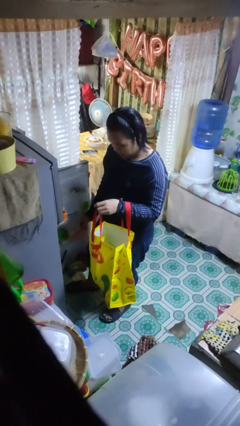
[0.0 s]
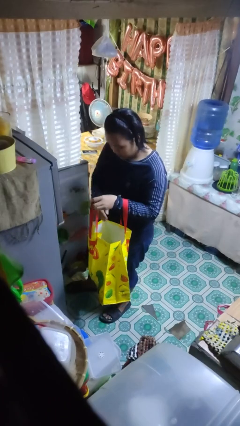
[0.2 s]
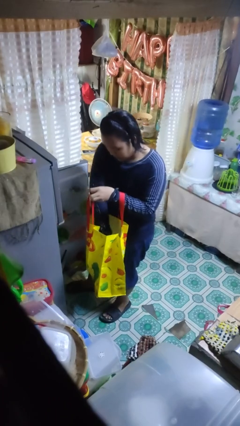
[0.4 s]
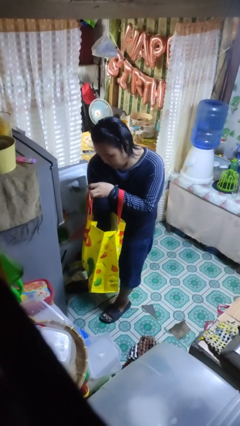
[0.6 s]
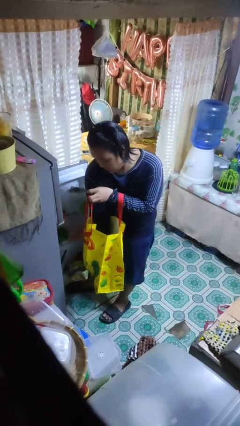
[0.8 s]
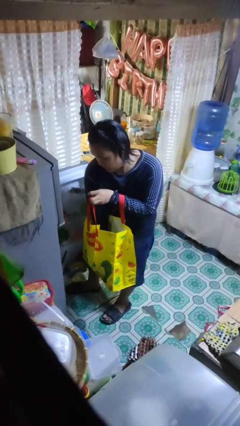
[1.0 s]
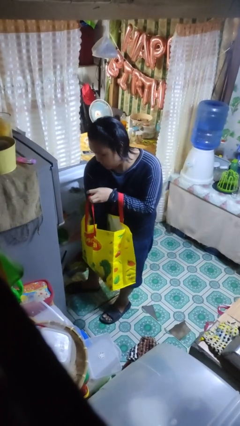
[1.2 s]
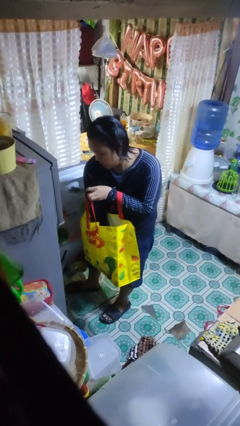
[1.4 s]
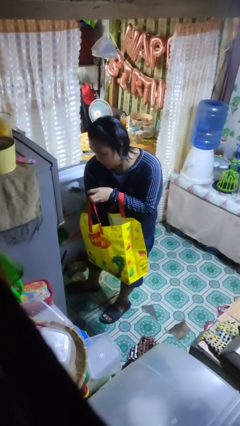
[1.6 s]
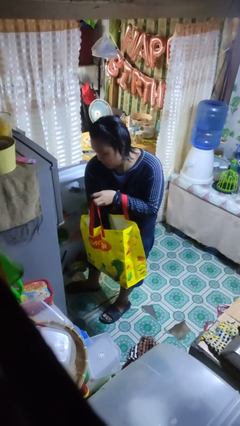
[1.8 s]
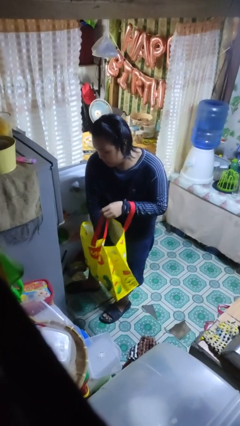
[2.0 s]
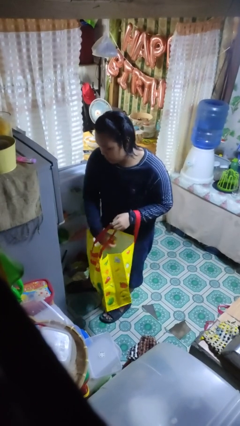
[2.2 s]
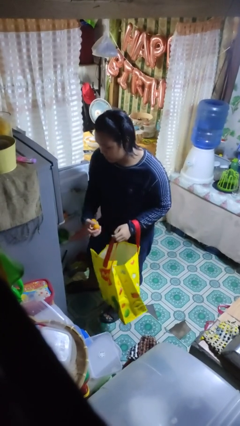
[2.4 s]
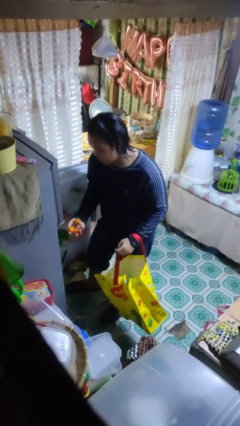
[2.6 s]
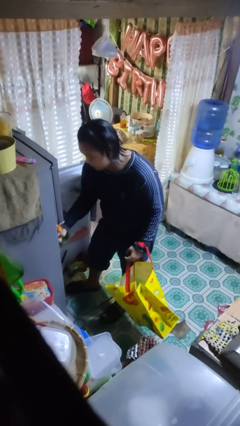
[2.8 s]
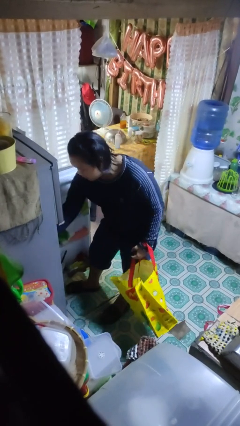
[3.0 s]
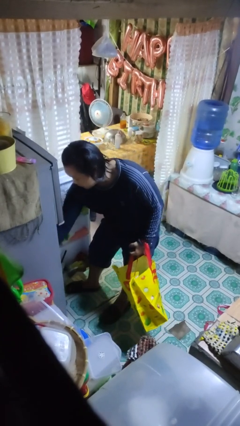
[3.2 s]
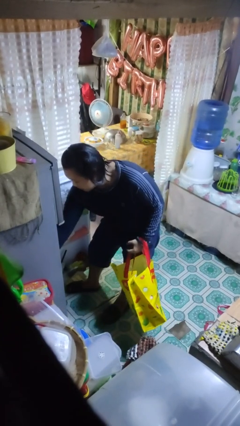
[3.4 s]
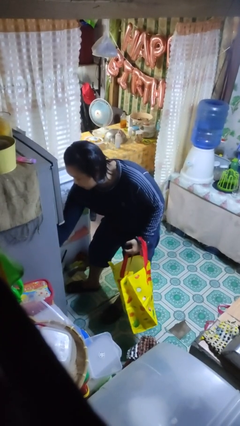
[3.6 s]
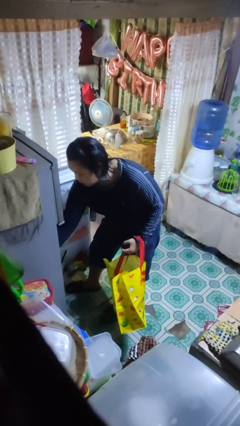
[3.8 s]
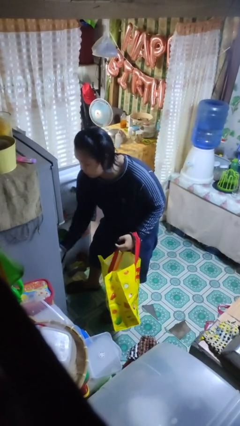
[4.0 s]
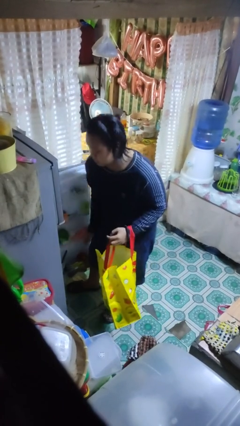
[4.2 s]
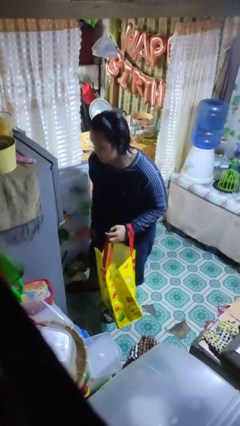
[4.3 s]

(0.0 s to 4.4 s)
person loads groceries into refrigerator

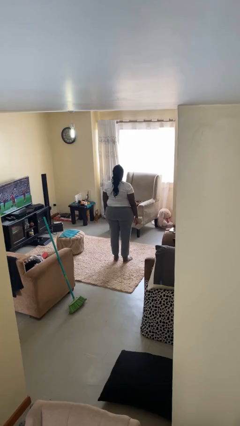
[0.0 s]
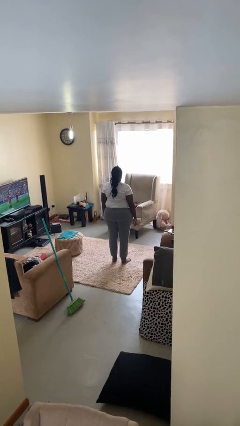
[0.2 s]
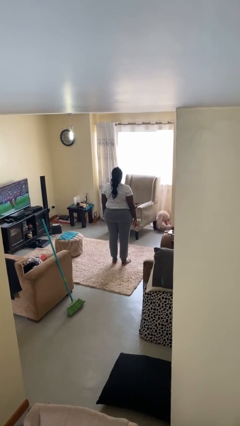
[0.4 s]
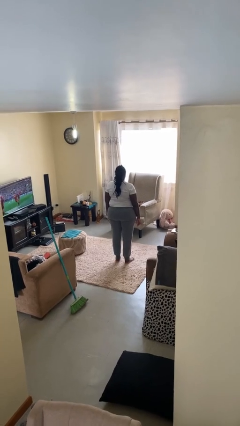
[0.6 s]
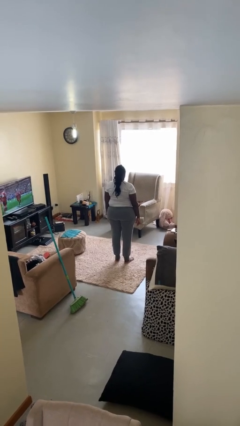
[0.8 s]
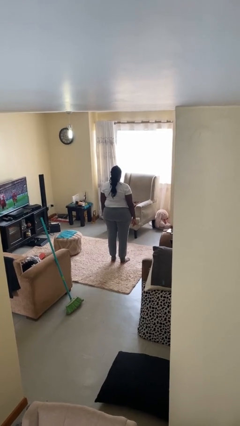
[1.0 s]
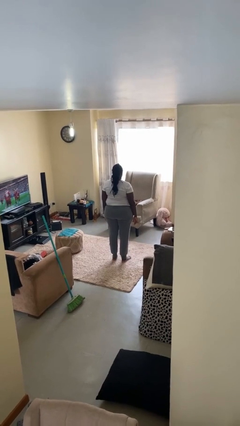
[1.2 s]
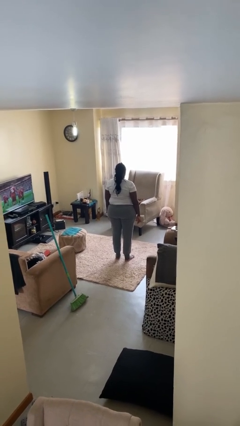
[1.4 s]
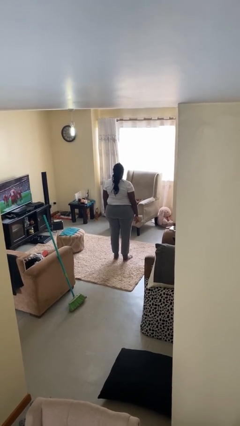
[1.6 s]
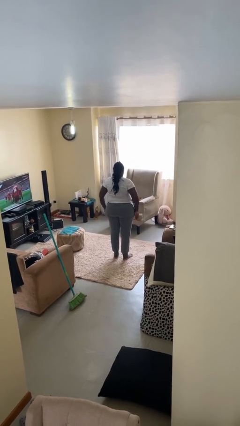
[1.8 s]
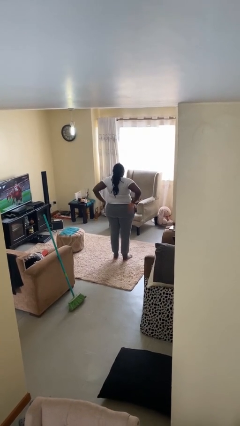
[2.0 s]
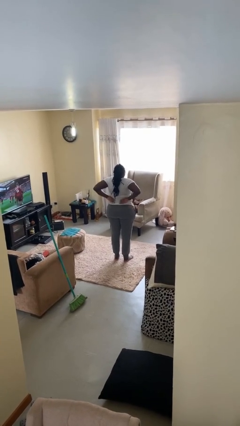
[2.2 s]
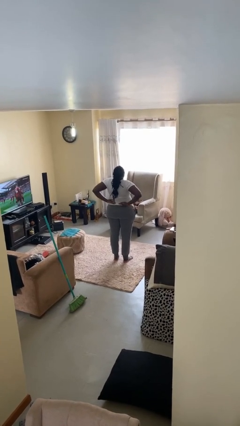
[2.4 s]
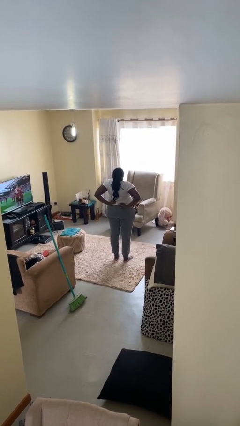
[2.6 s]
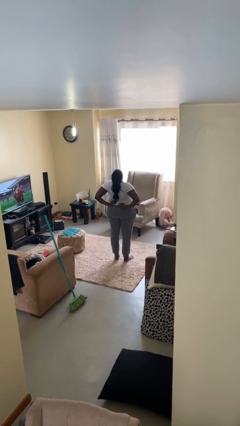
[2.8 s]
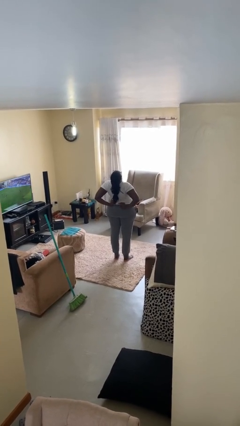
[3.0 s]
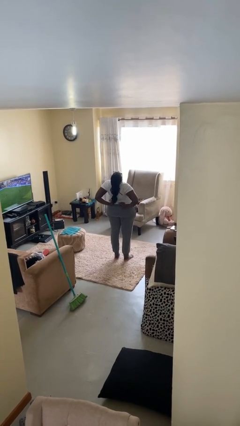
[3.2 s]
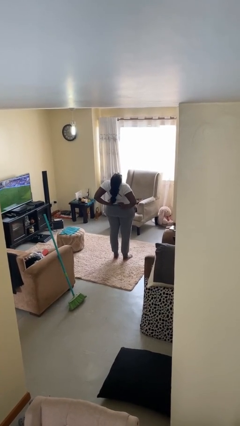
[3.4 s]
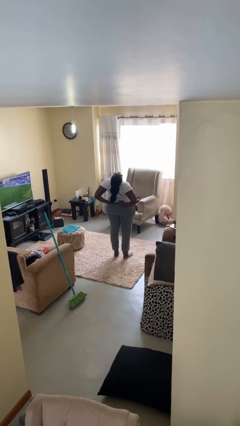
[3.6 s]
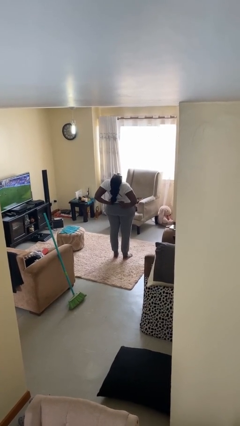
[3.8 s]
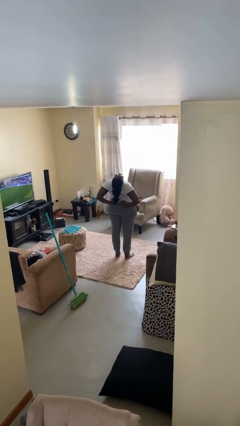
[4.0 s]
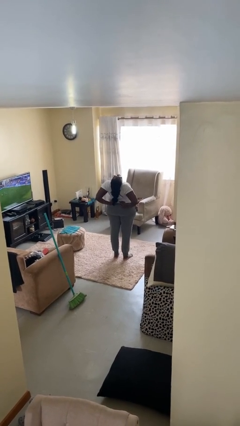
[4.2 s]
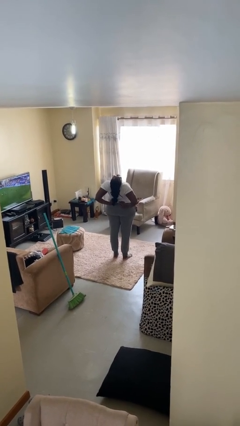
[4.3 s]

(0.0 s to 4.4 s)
person stretches back

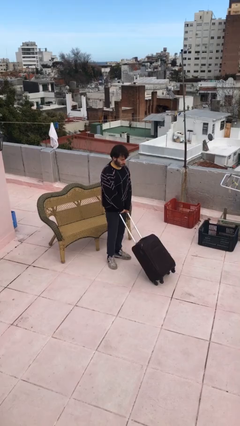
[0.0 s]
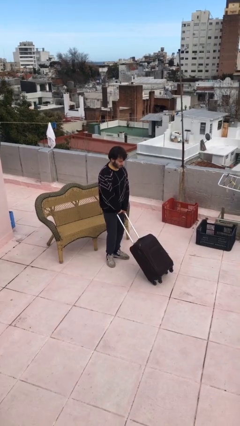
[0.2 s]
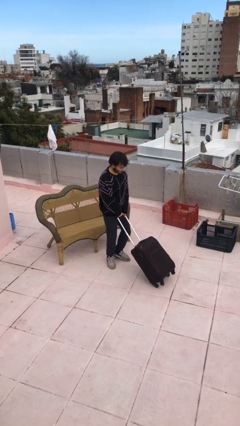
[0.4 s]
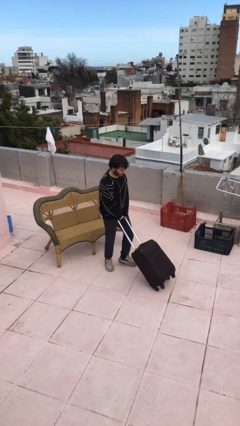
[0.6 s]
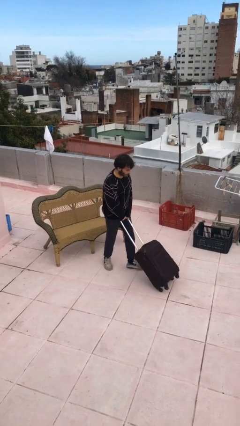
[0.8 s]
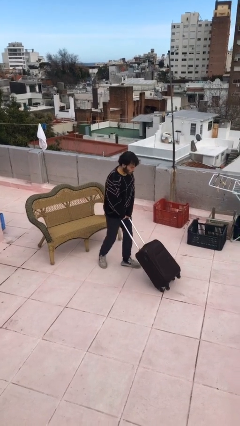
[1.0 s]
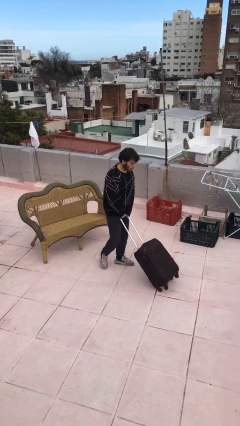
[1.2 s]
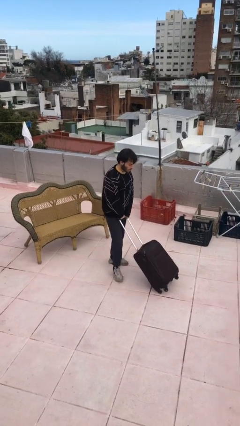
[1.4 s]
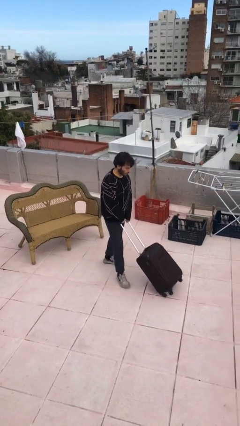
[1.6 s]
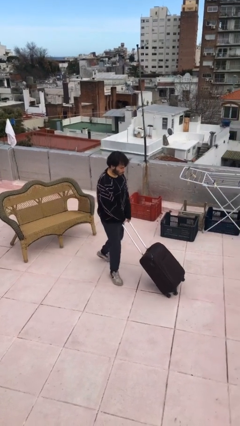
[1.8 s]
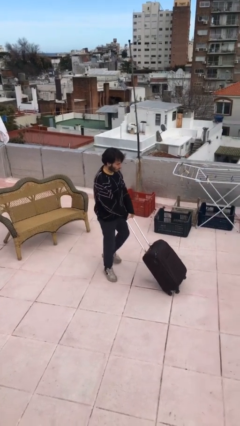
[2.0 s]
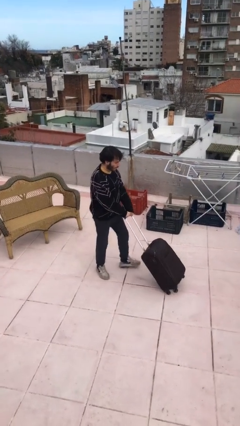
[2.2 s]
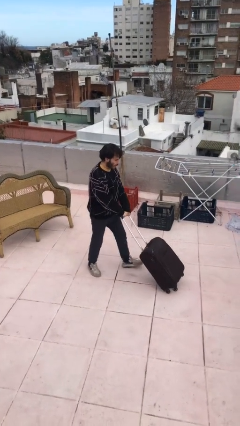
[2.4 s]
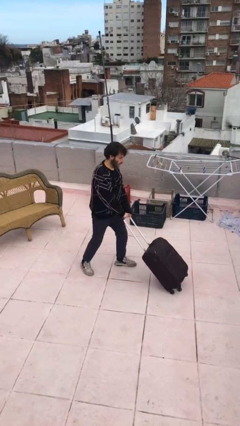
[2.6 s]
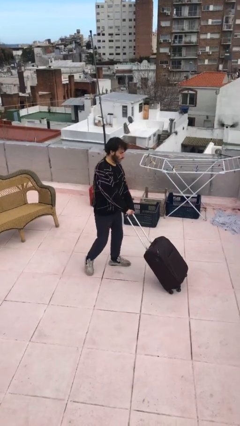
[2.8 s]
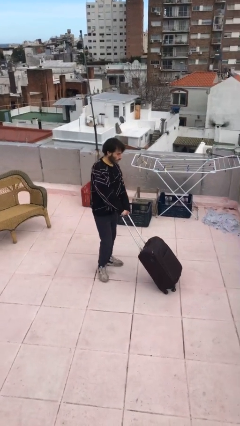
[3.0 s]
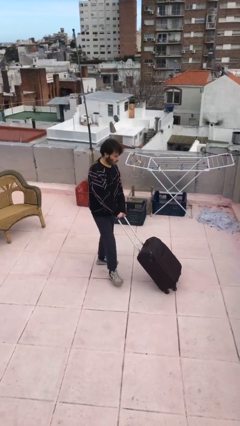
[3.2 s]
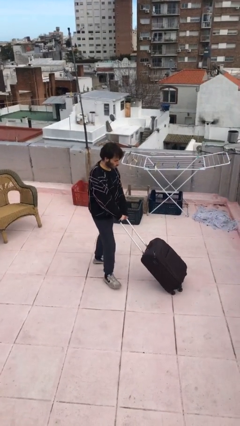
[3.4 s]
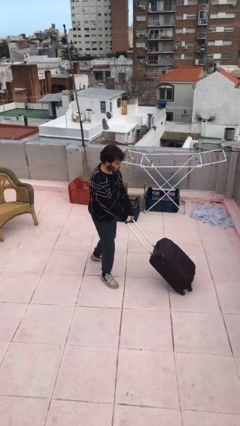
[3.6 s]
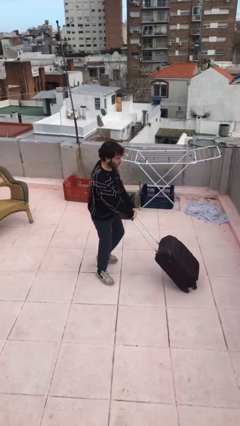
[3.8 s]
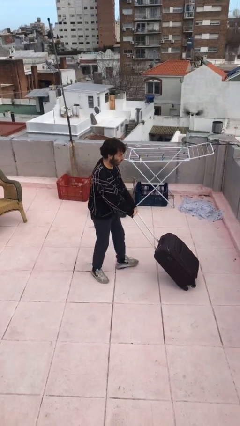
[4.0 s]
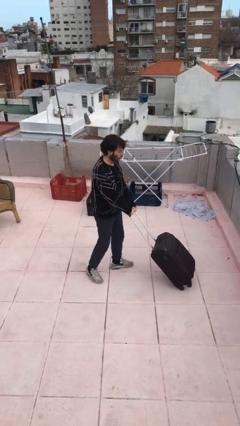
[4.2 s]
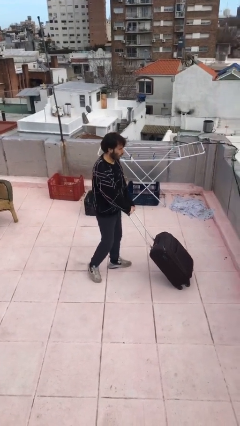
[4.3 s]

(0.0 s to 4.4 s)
person pushes wheeled cart

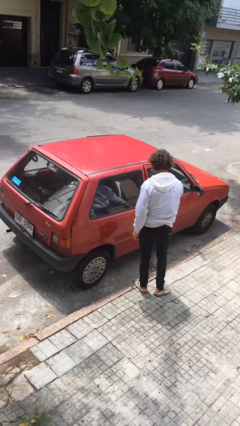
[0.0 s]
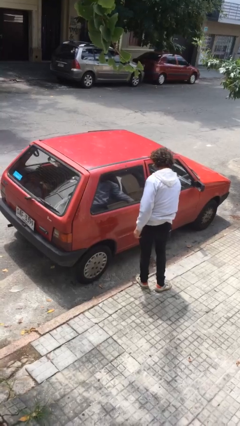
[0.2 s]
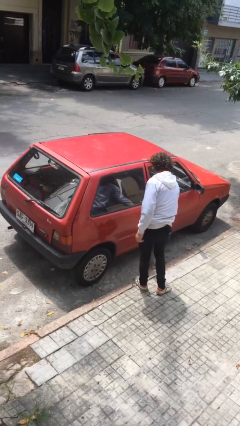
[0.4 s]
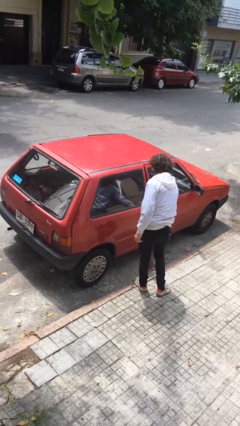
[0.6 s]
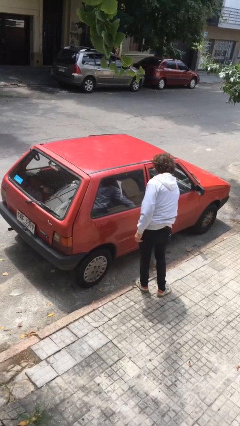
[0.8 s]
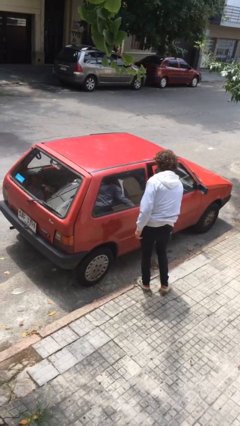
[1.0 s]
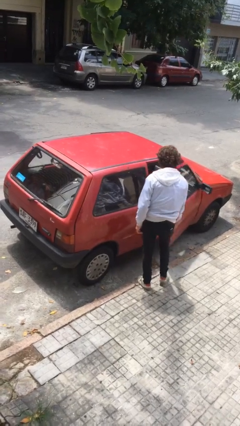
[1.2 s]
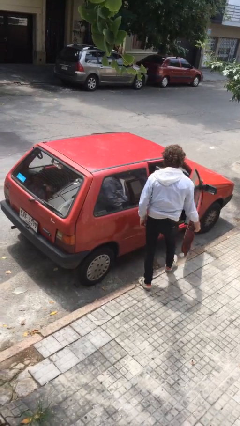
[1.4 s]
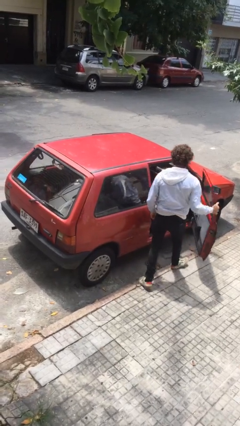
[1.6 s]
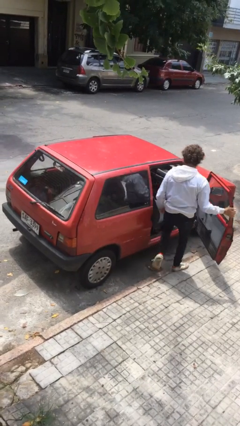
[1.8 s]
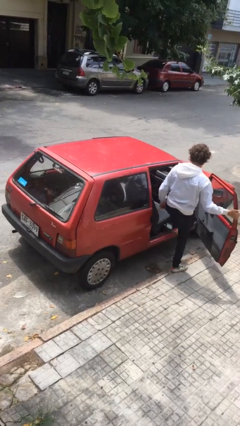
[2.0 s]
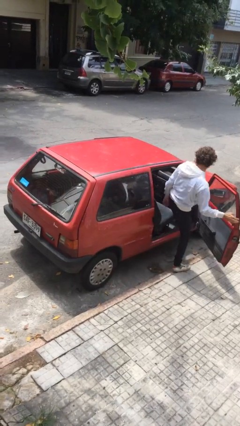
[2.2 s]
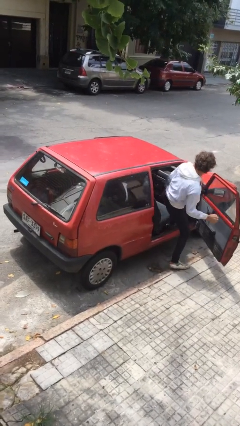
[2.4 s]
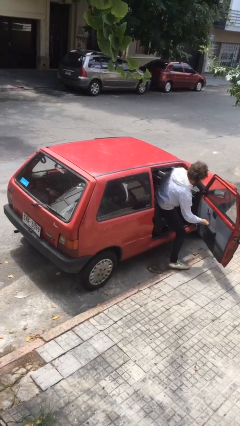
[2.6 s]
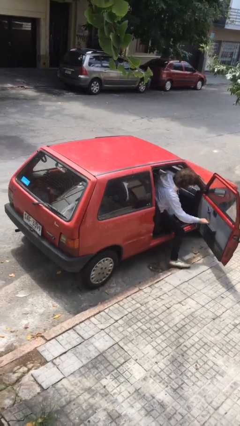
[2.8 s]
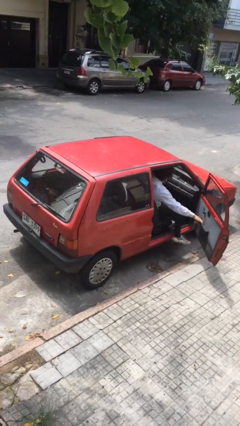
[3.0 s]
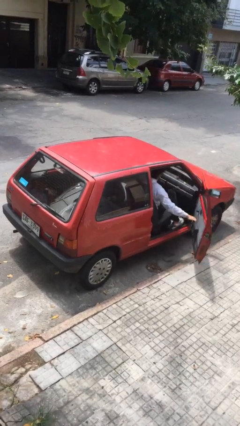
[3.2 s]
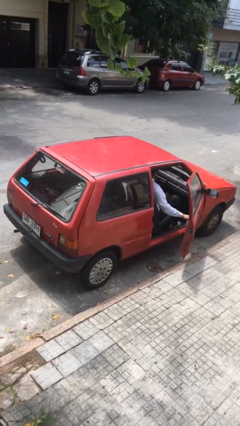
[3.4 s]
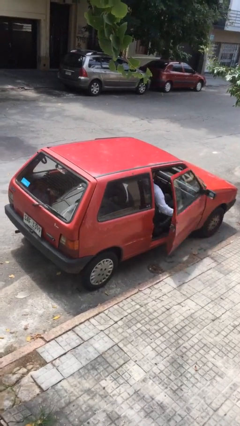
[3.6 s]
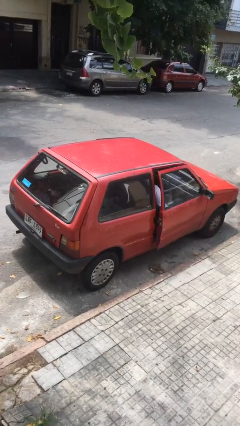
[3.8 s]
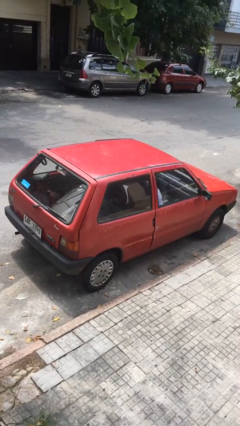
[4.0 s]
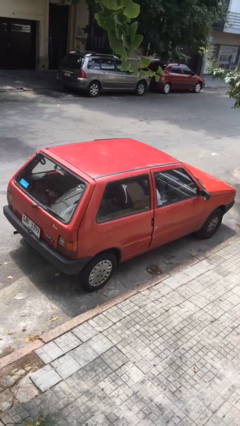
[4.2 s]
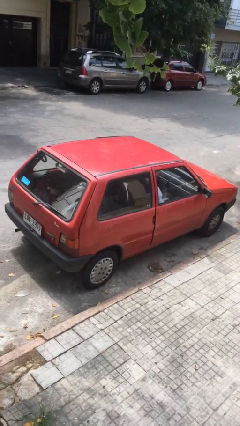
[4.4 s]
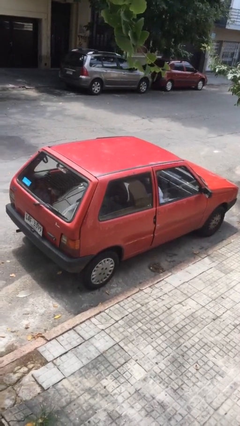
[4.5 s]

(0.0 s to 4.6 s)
car picks up person

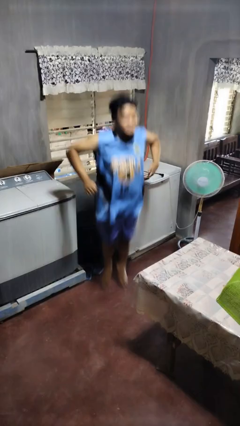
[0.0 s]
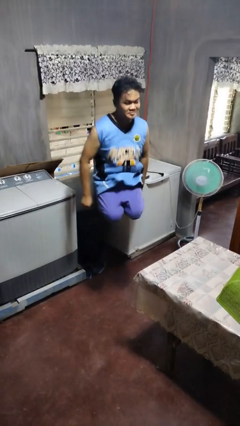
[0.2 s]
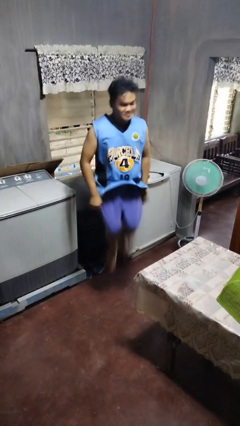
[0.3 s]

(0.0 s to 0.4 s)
person jumps
